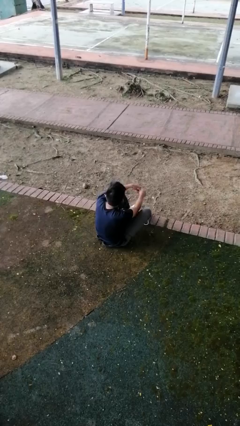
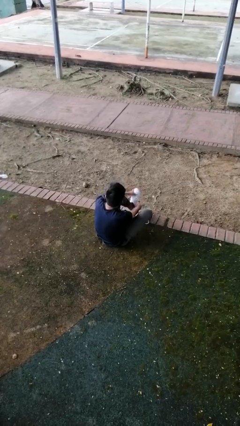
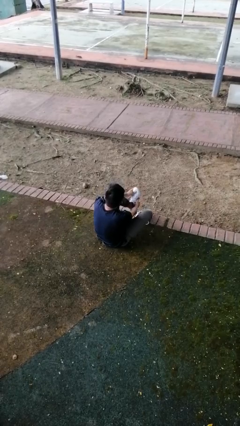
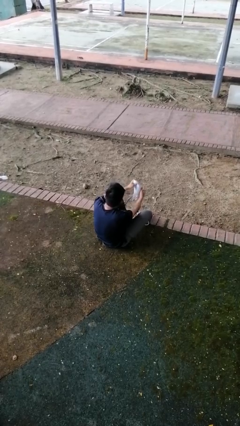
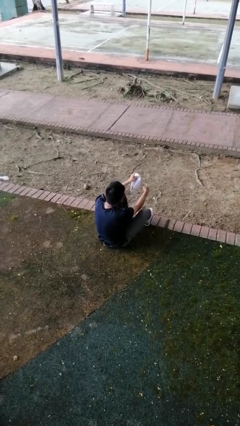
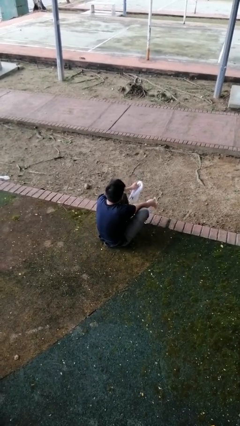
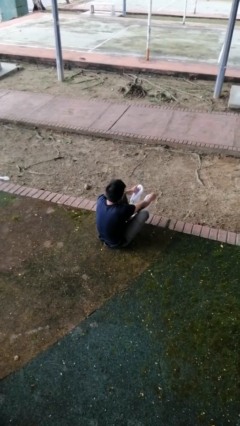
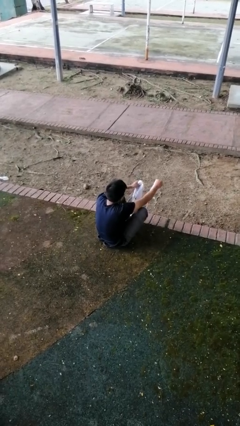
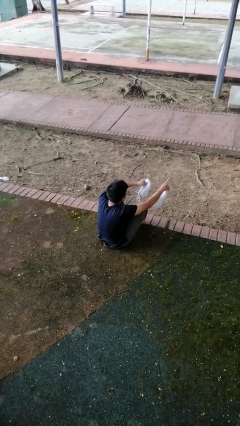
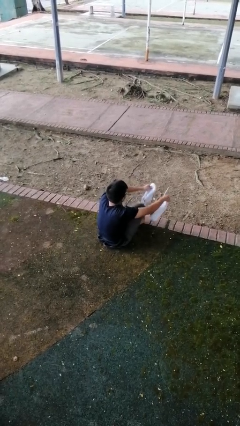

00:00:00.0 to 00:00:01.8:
person takes off shoes

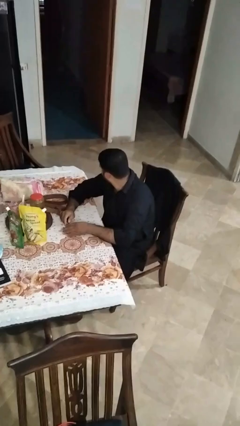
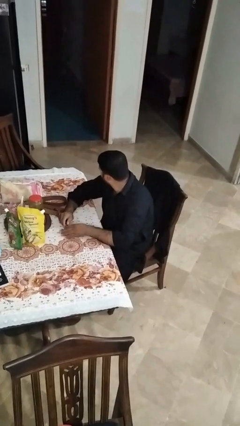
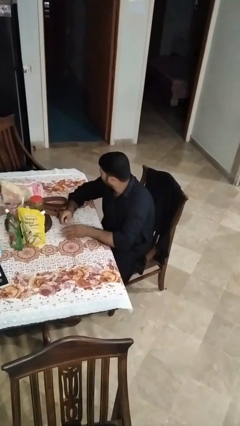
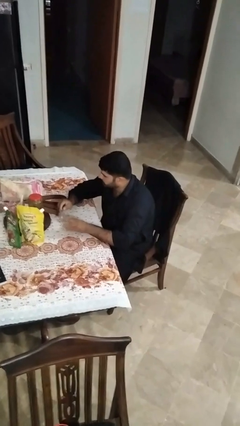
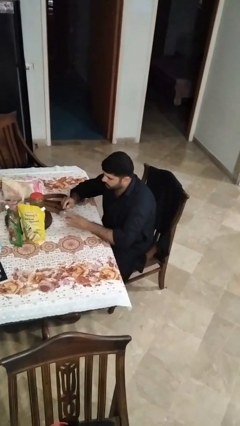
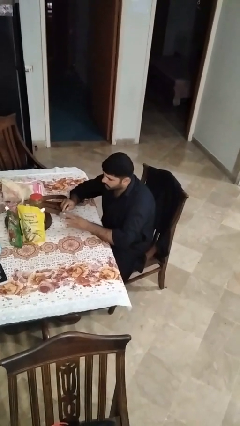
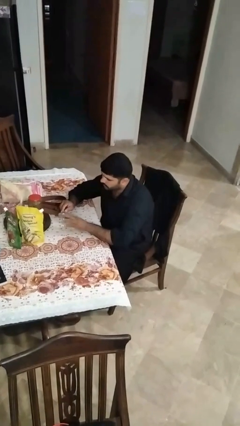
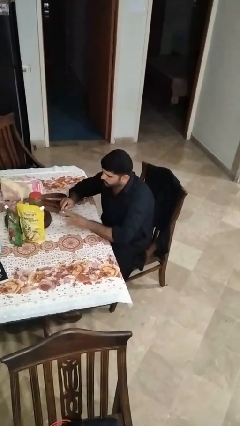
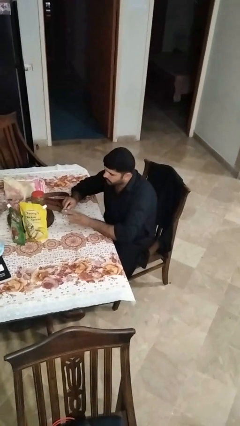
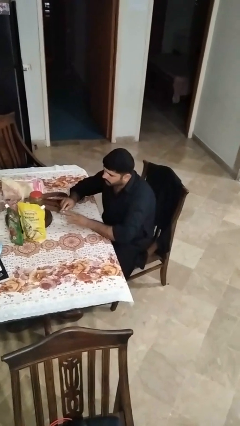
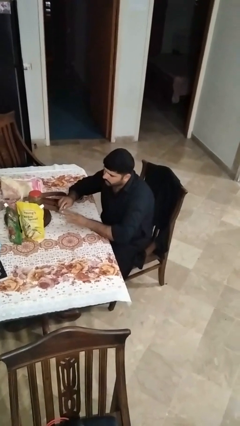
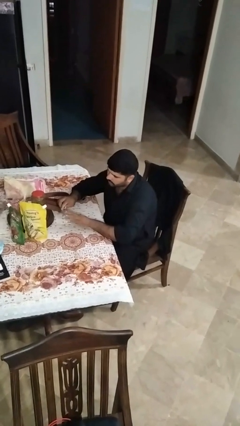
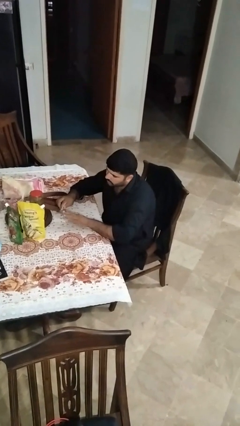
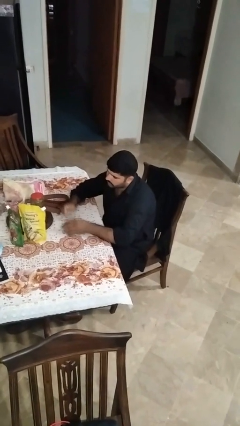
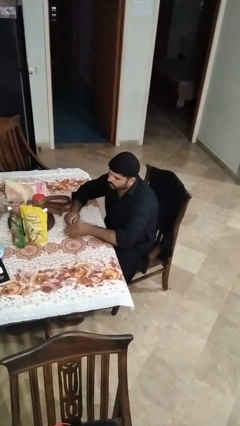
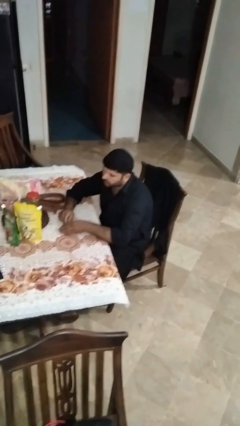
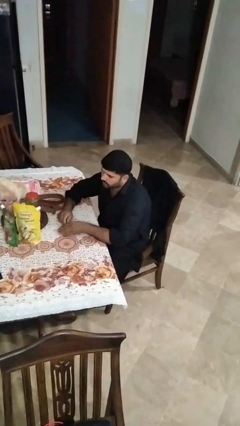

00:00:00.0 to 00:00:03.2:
person files fingernails

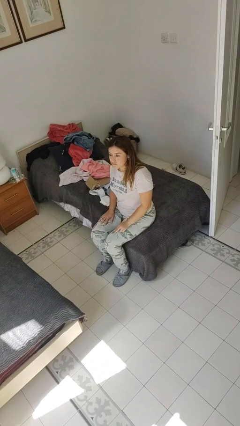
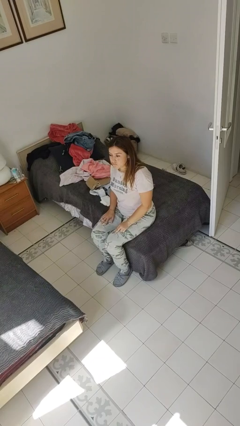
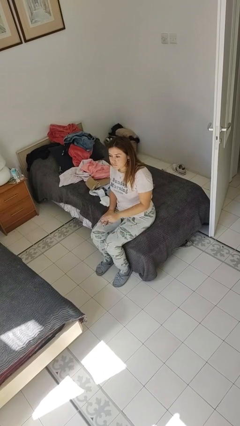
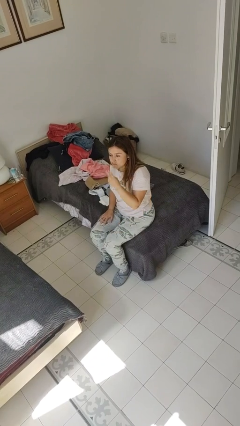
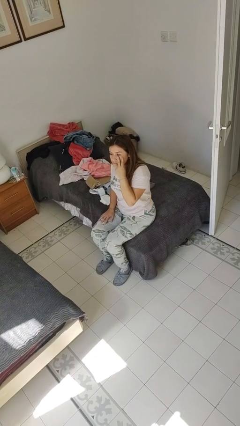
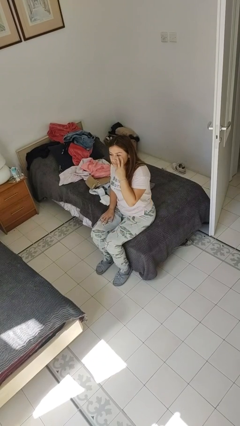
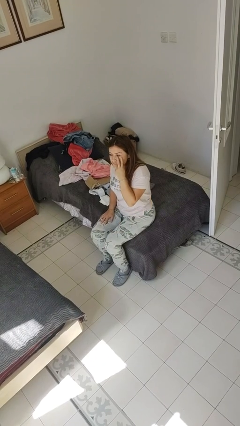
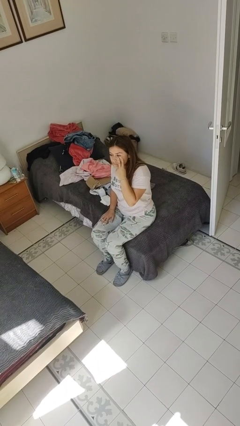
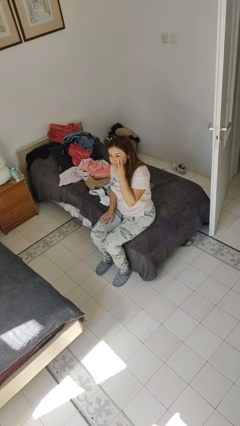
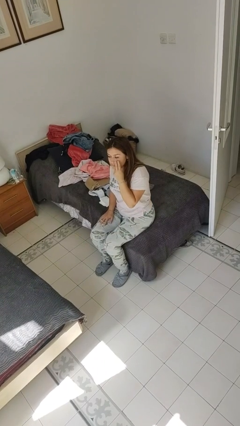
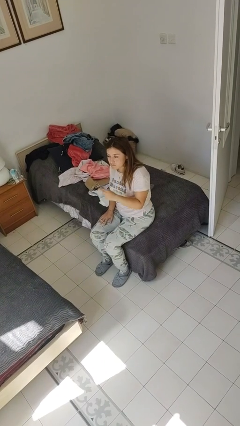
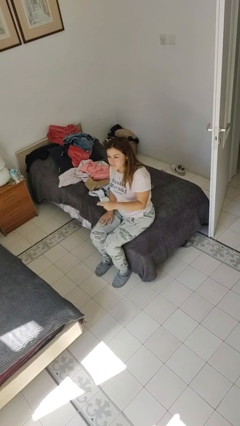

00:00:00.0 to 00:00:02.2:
person gestures watch closely

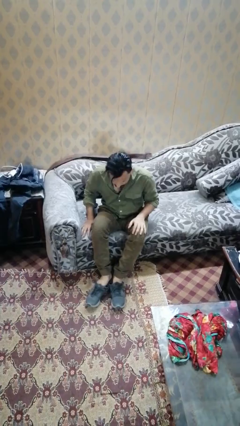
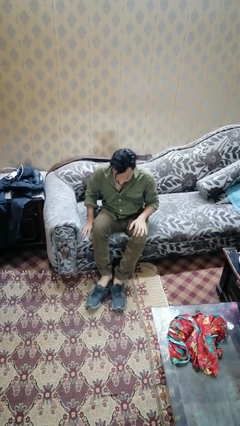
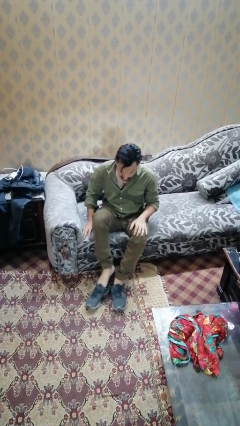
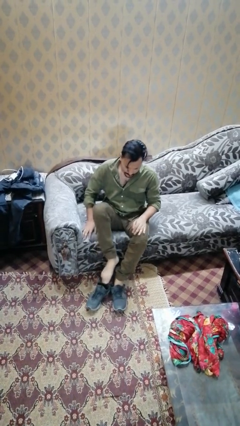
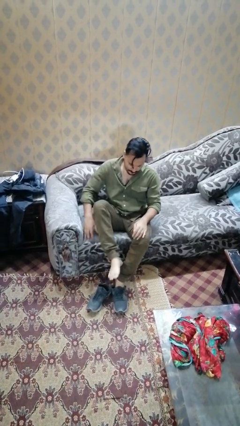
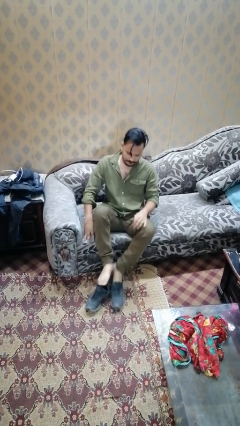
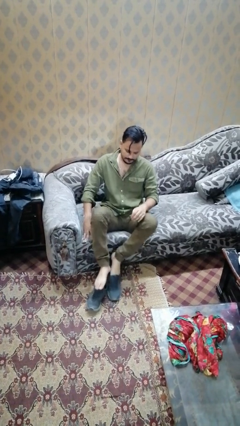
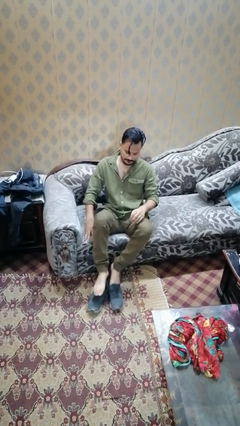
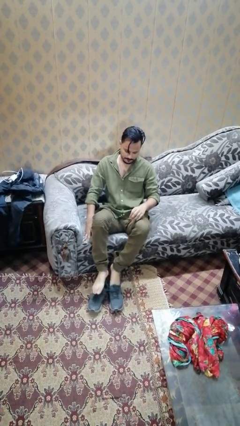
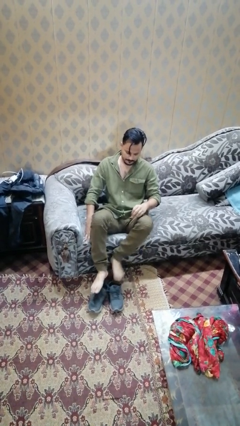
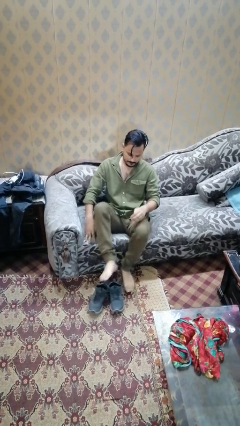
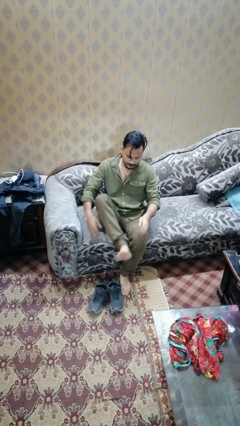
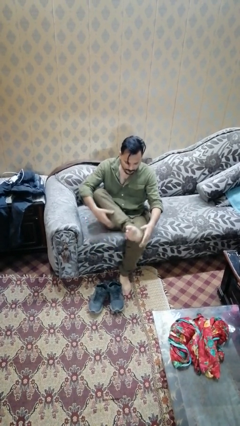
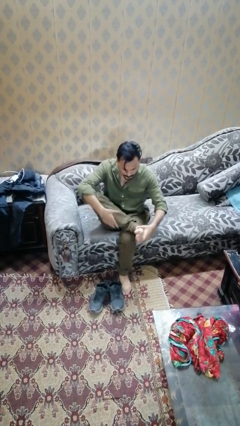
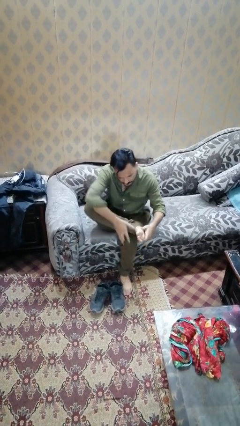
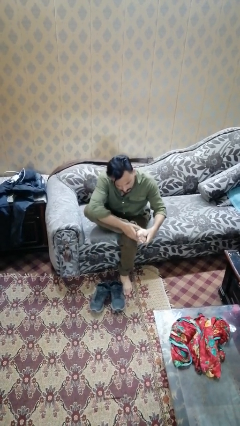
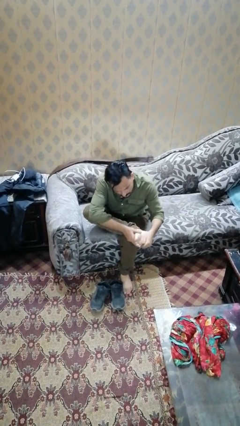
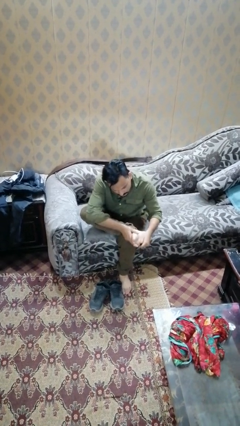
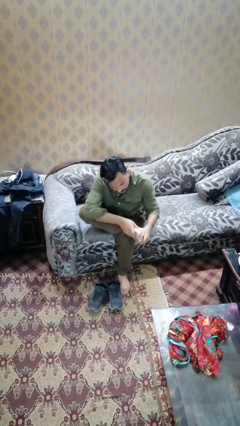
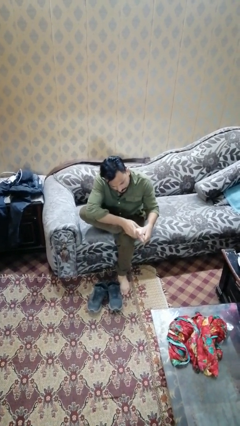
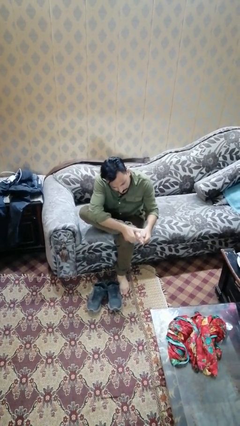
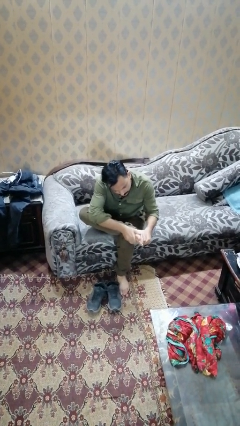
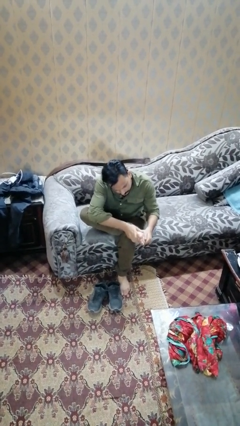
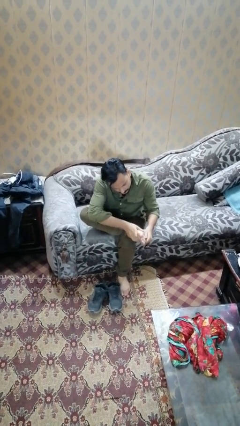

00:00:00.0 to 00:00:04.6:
person rubs foot

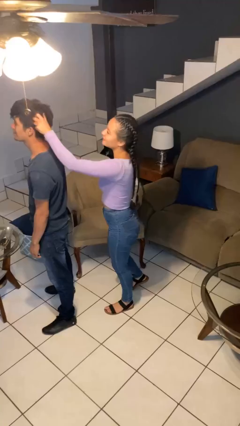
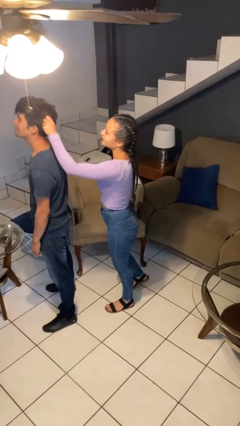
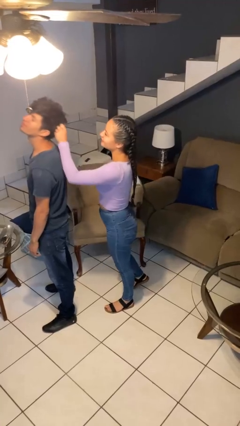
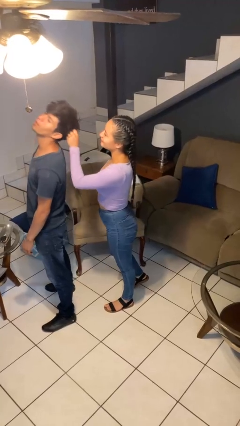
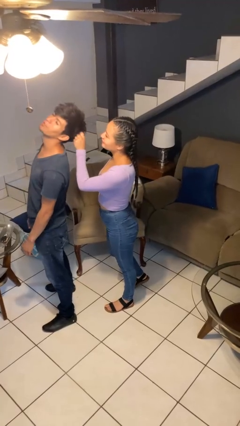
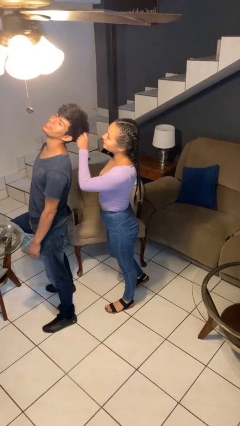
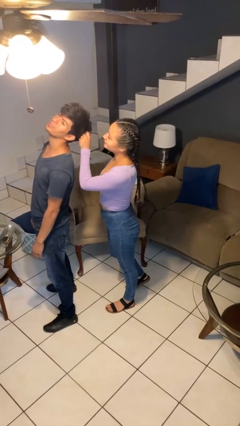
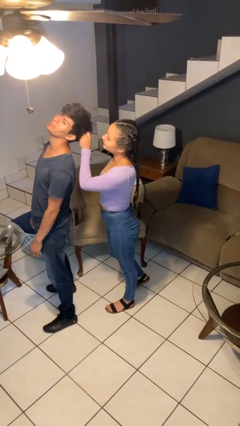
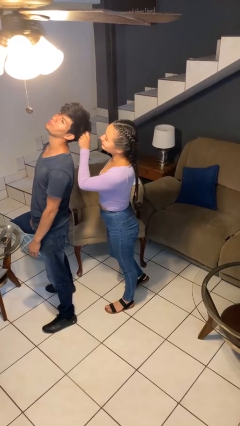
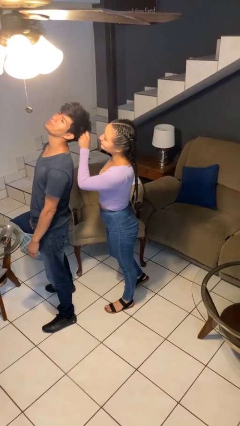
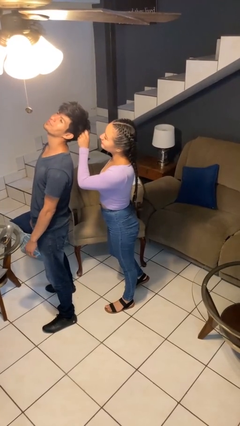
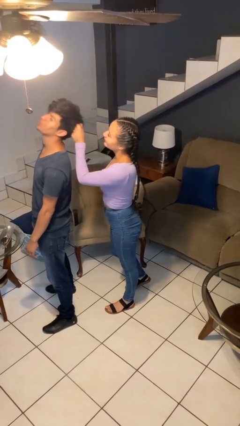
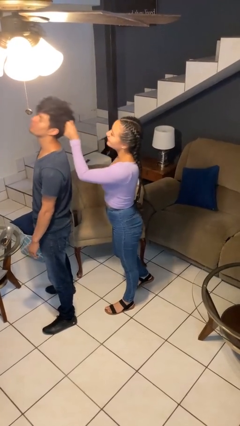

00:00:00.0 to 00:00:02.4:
person grabs person by hair

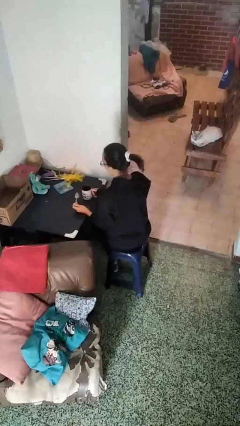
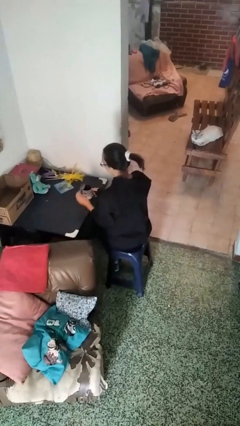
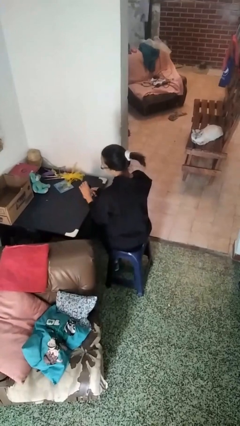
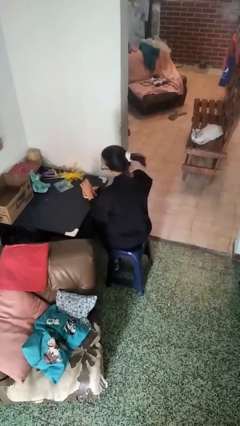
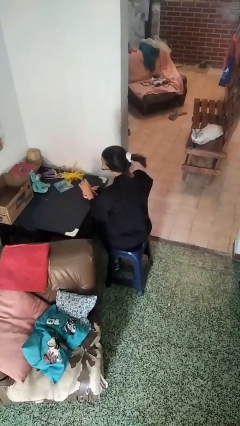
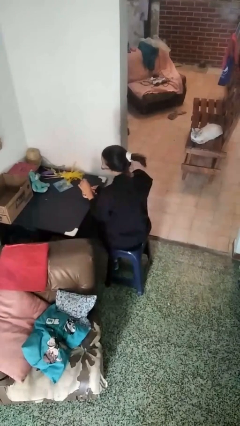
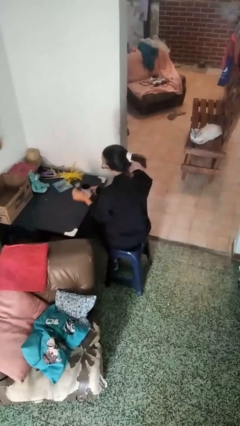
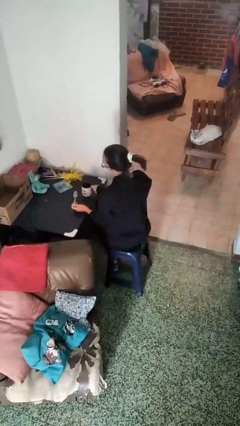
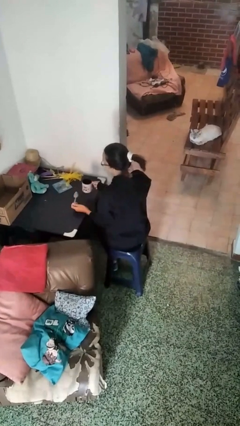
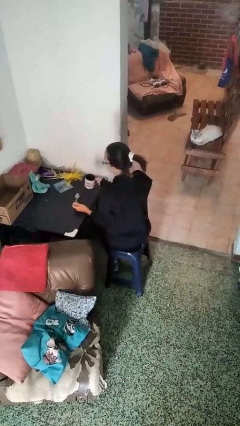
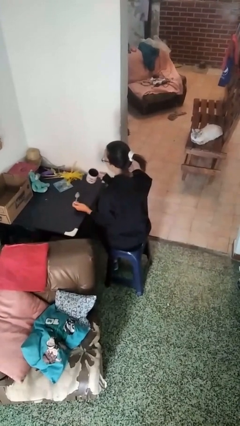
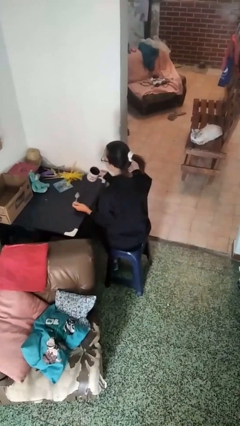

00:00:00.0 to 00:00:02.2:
person stirs mug

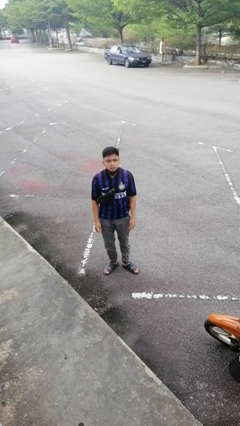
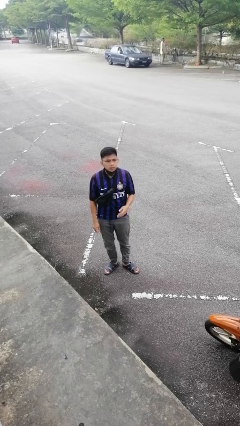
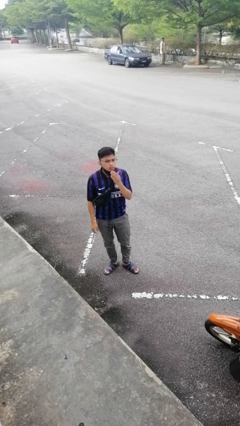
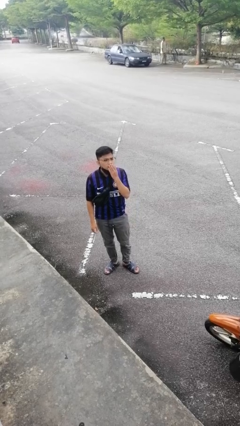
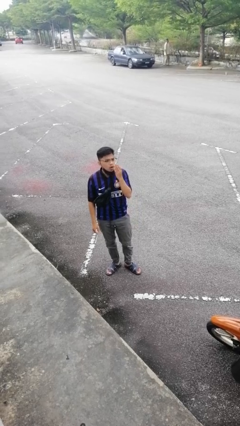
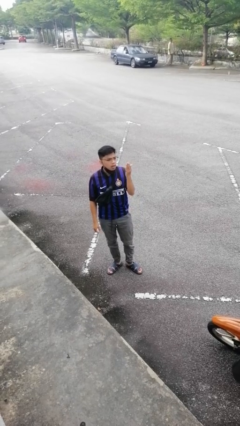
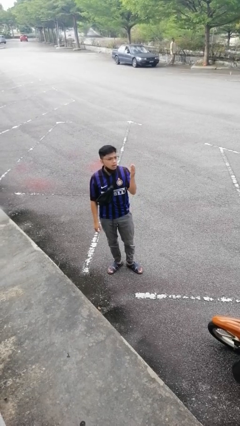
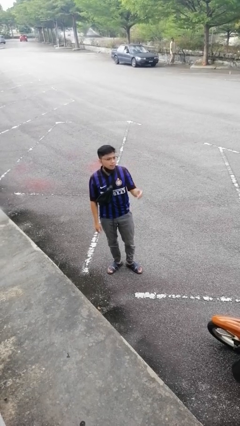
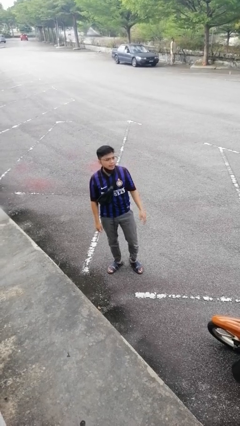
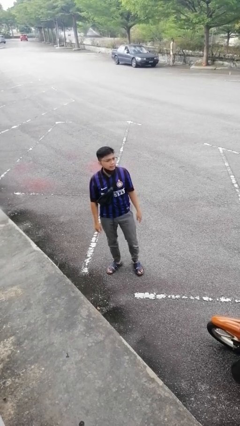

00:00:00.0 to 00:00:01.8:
person gestures blow kiss
